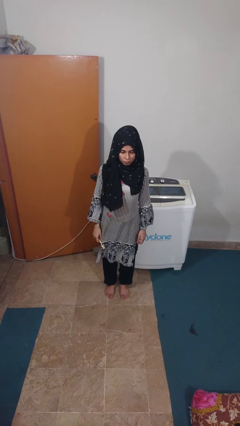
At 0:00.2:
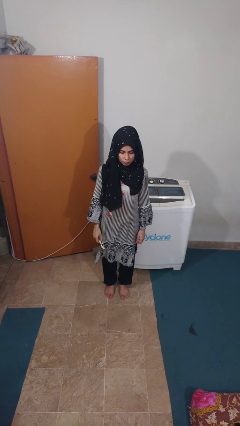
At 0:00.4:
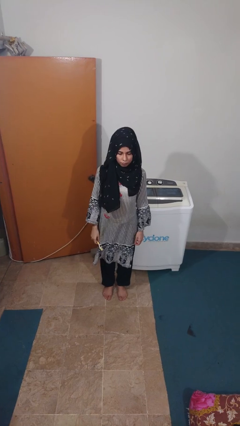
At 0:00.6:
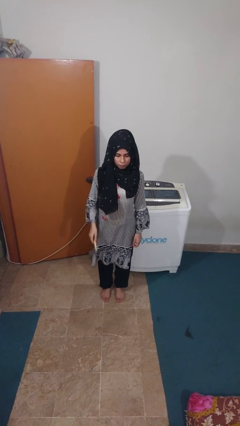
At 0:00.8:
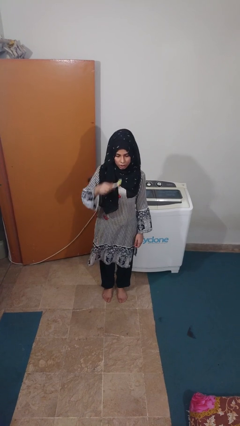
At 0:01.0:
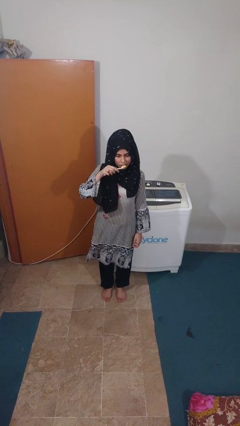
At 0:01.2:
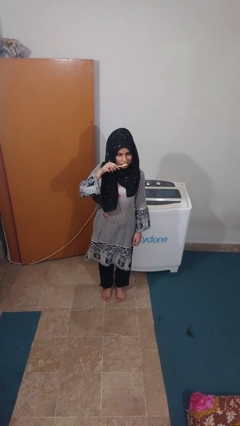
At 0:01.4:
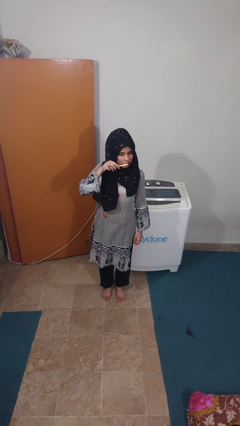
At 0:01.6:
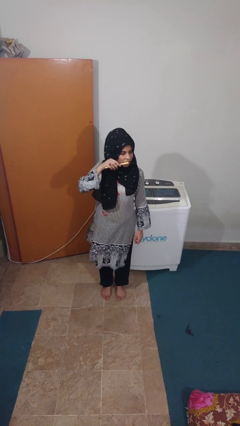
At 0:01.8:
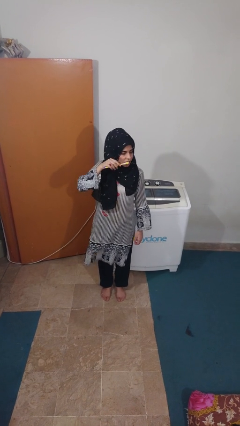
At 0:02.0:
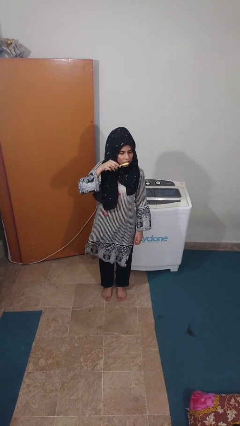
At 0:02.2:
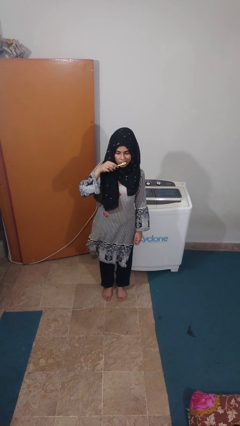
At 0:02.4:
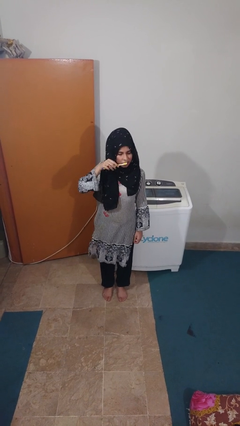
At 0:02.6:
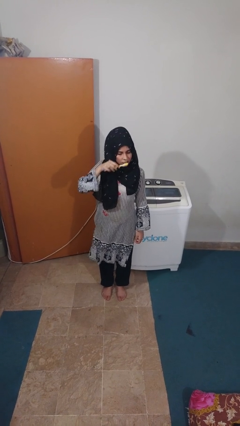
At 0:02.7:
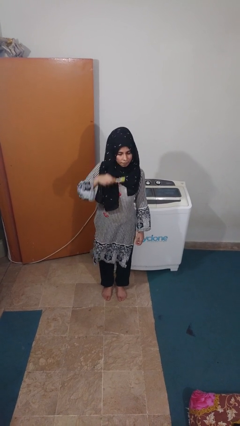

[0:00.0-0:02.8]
person brushes teeth

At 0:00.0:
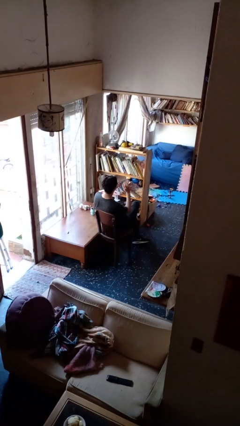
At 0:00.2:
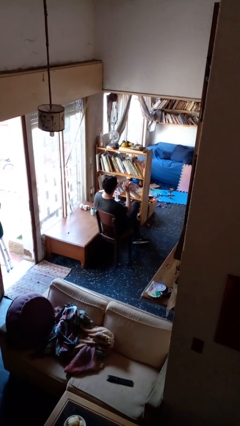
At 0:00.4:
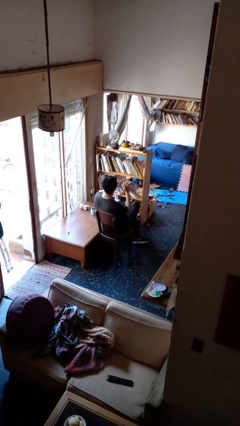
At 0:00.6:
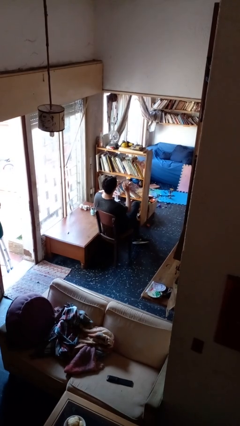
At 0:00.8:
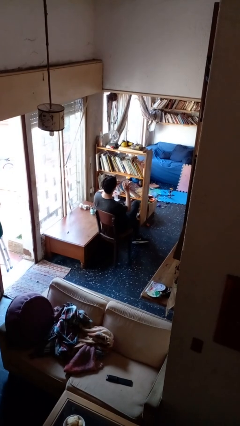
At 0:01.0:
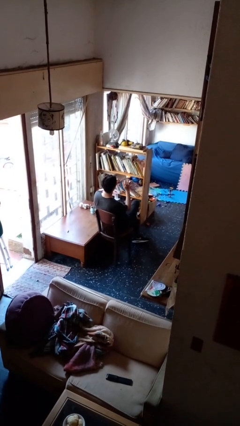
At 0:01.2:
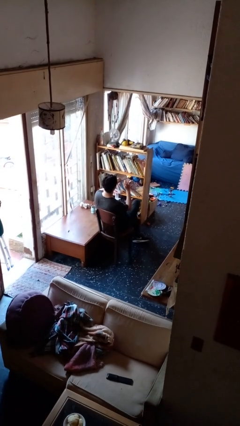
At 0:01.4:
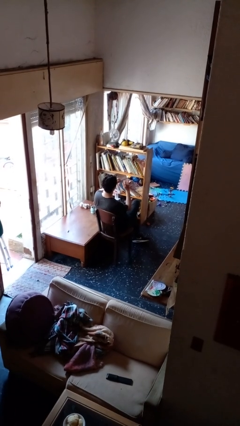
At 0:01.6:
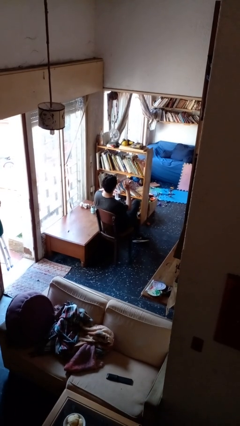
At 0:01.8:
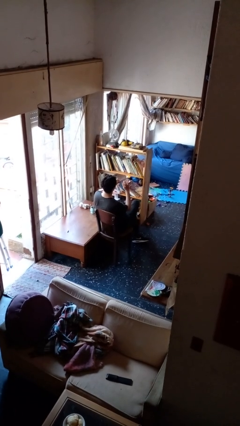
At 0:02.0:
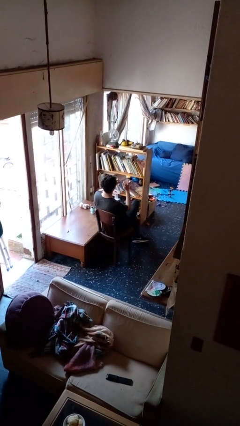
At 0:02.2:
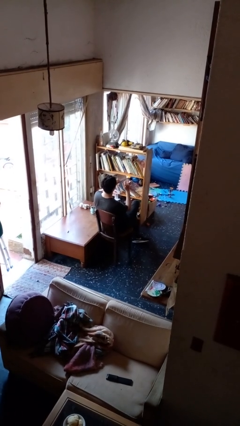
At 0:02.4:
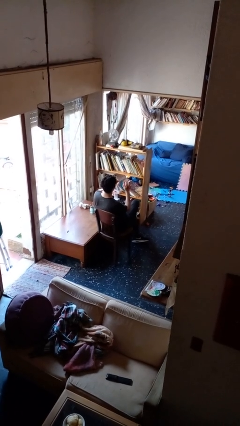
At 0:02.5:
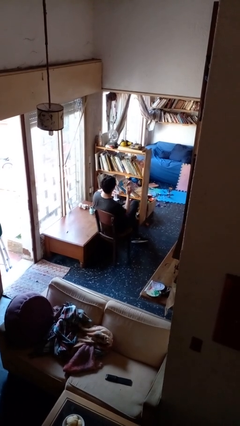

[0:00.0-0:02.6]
person files fingernails

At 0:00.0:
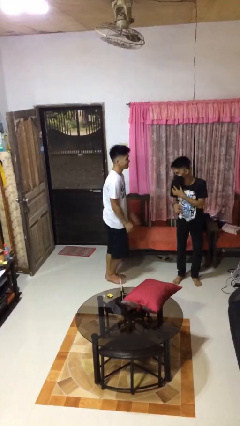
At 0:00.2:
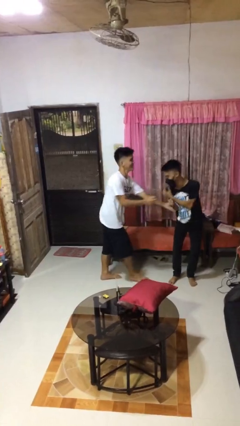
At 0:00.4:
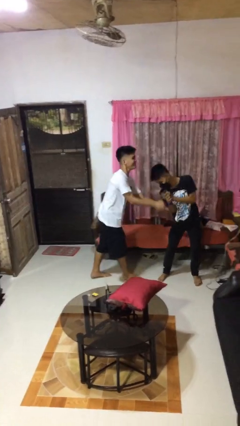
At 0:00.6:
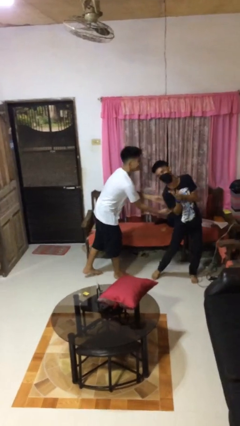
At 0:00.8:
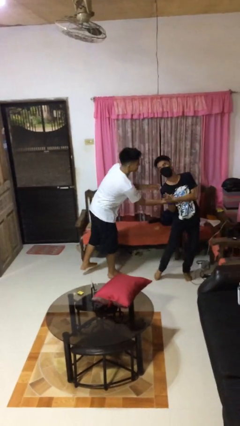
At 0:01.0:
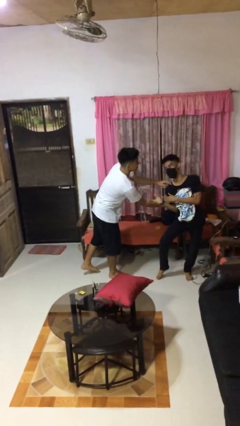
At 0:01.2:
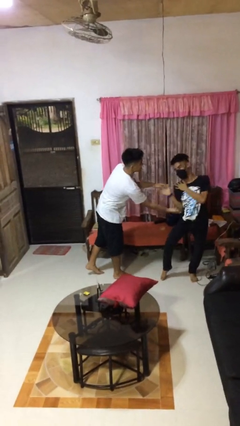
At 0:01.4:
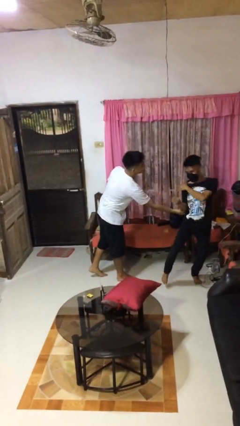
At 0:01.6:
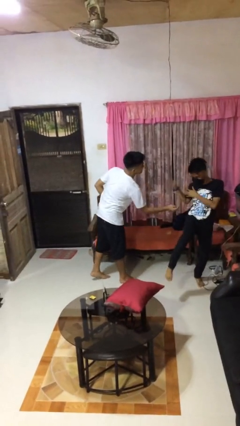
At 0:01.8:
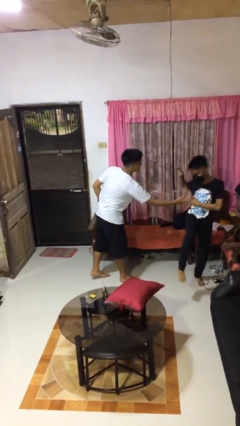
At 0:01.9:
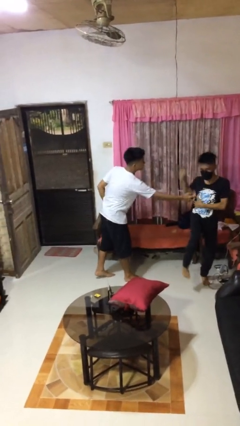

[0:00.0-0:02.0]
person tickles person

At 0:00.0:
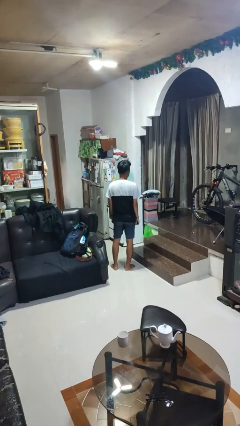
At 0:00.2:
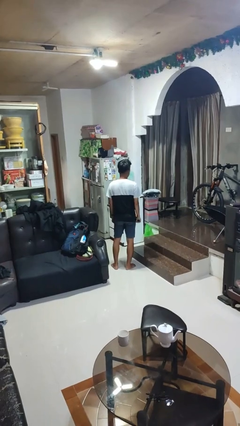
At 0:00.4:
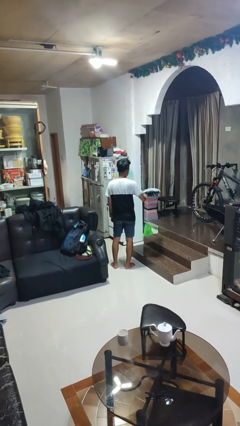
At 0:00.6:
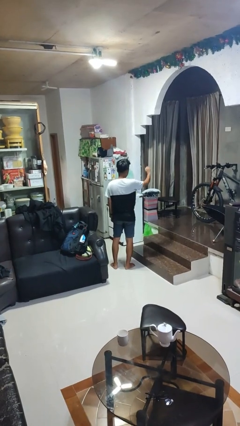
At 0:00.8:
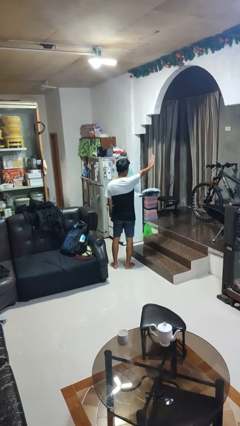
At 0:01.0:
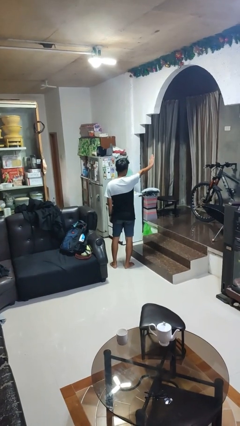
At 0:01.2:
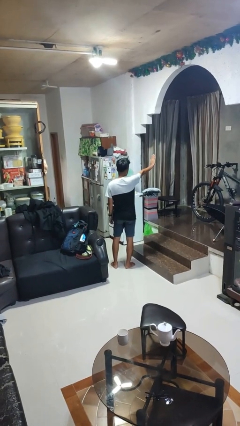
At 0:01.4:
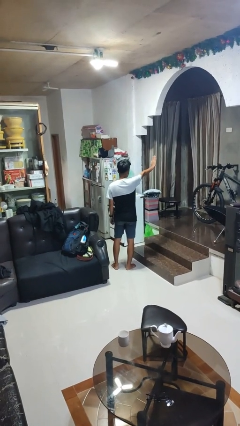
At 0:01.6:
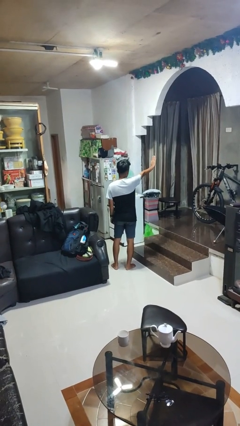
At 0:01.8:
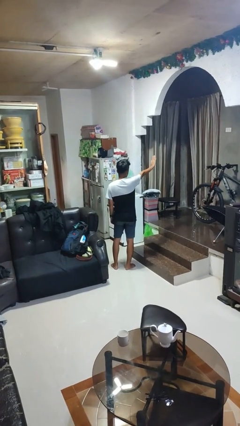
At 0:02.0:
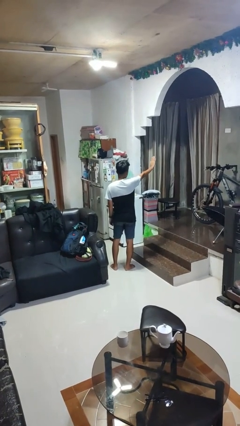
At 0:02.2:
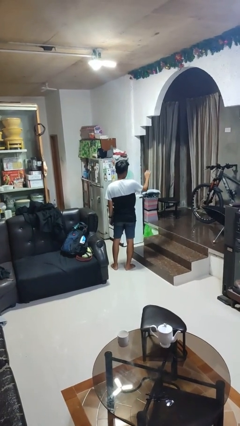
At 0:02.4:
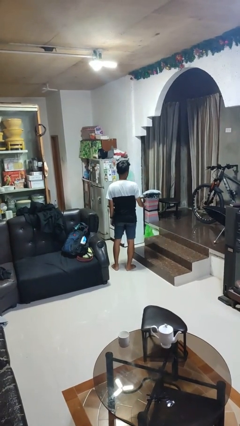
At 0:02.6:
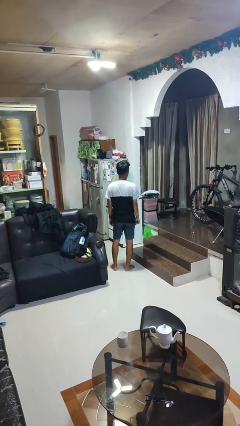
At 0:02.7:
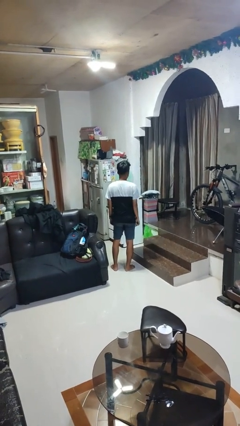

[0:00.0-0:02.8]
person gestures stop

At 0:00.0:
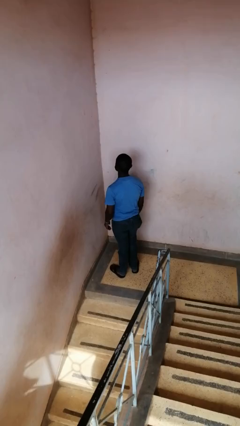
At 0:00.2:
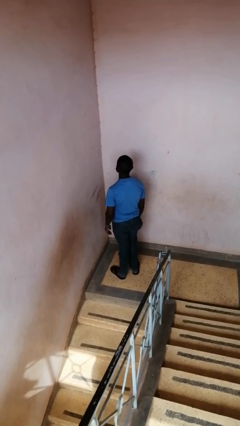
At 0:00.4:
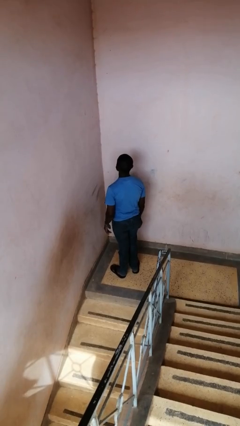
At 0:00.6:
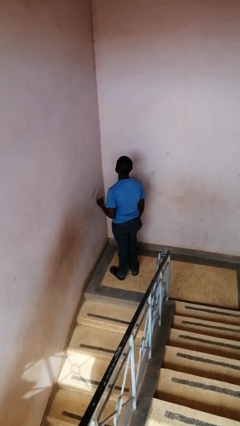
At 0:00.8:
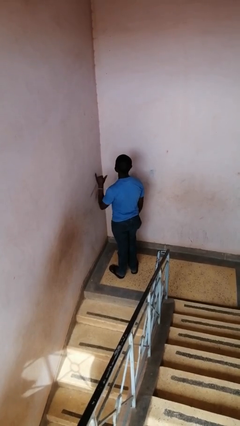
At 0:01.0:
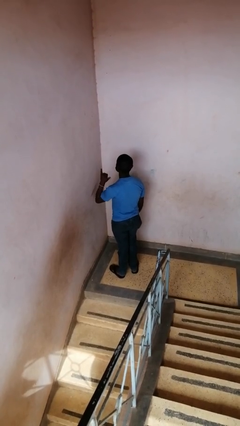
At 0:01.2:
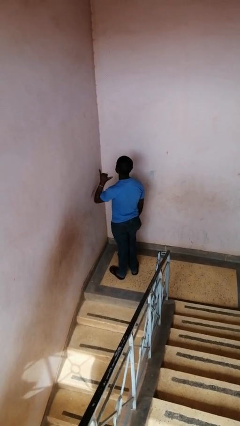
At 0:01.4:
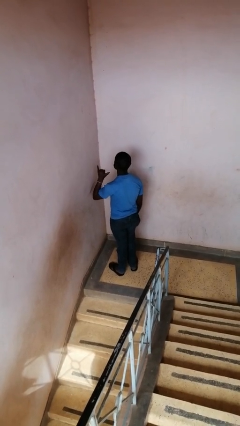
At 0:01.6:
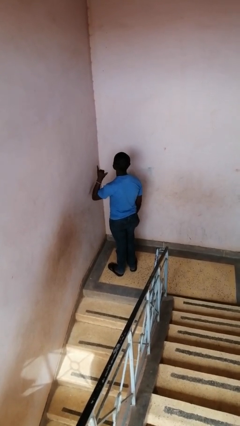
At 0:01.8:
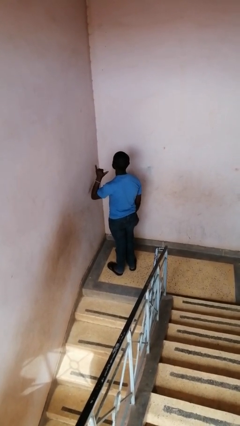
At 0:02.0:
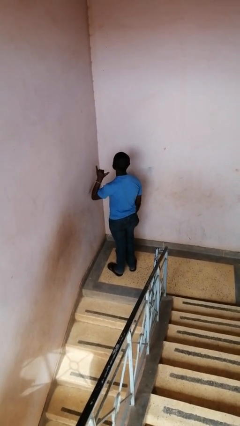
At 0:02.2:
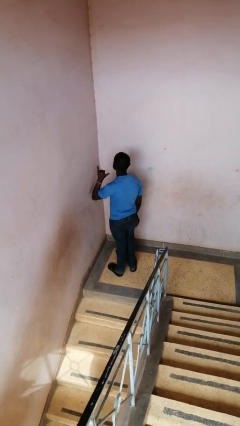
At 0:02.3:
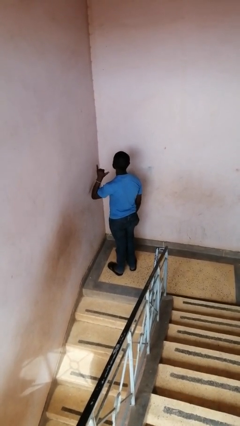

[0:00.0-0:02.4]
person gestures hang loose

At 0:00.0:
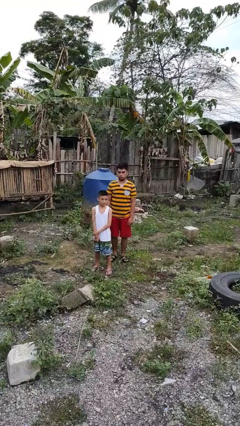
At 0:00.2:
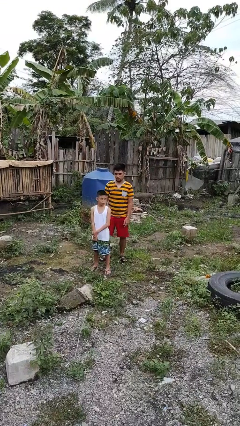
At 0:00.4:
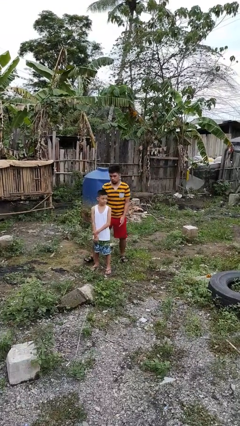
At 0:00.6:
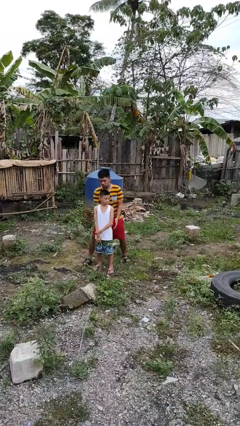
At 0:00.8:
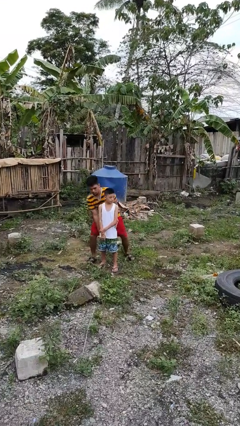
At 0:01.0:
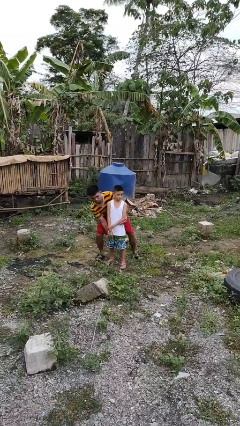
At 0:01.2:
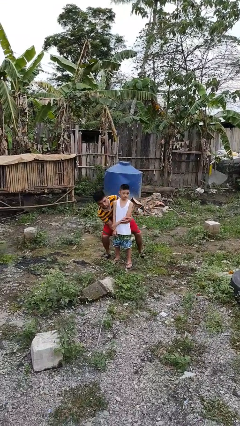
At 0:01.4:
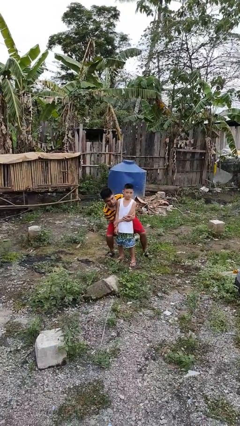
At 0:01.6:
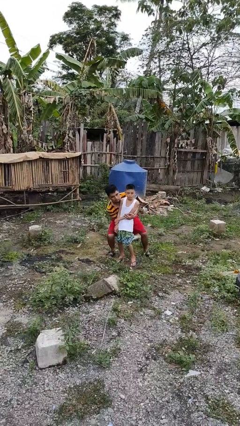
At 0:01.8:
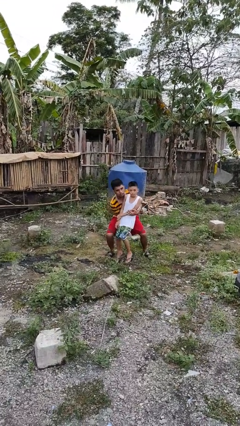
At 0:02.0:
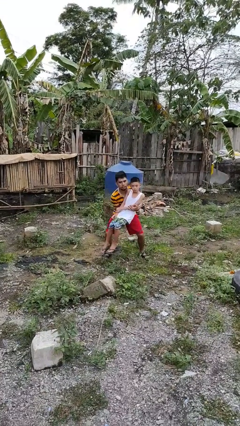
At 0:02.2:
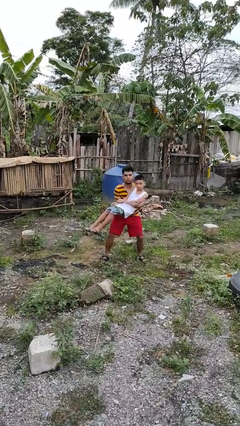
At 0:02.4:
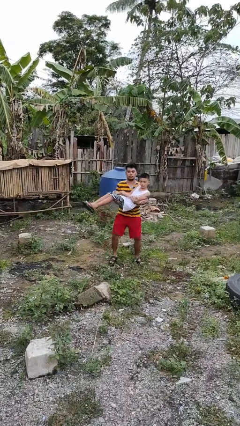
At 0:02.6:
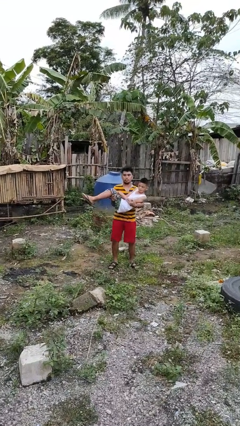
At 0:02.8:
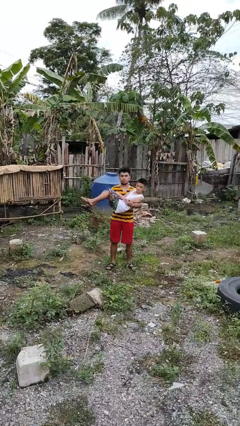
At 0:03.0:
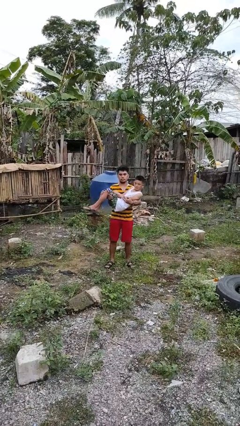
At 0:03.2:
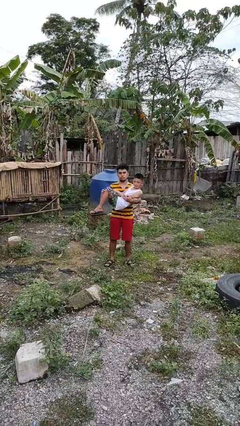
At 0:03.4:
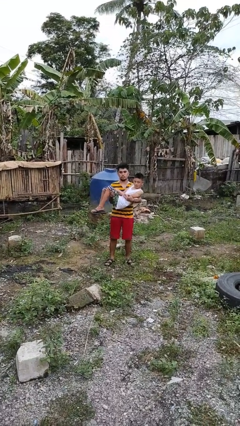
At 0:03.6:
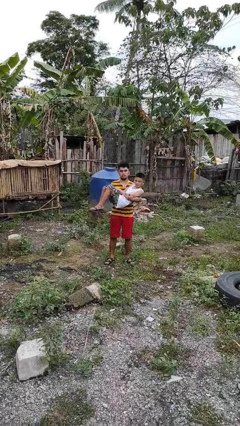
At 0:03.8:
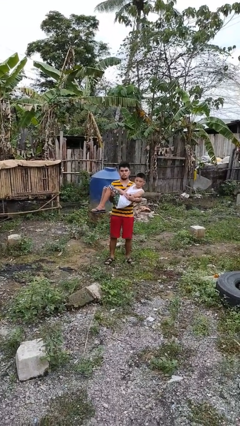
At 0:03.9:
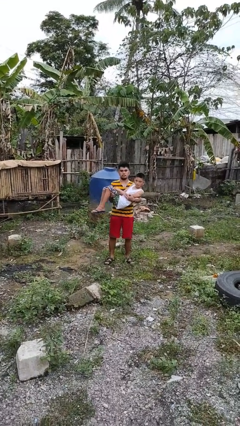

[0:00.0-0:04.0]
person picks up person

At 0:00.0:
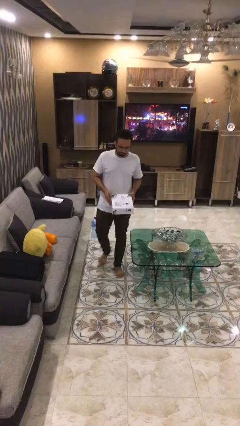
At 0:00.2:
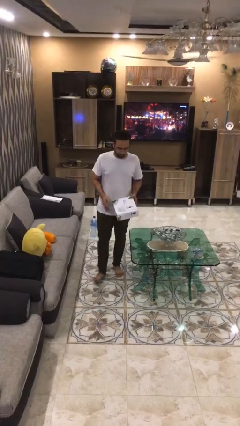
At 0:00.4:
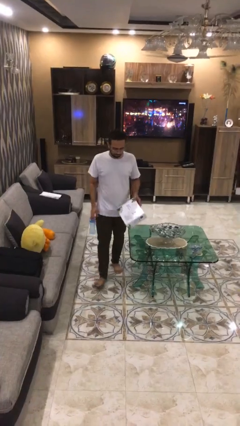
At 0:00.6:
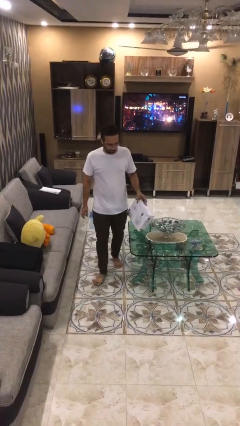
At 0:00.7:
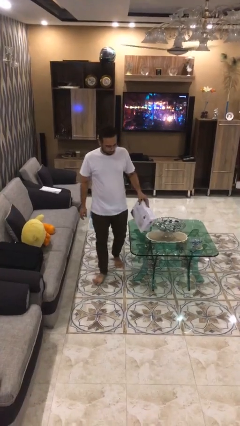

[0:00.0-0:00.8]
person puts down object on table

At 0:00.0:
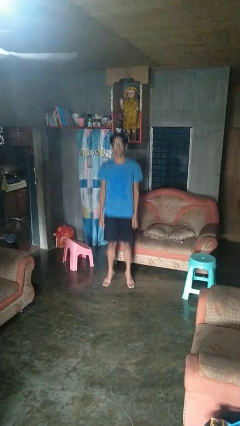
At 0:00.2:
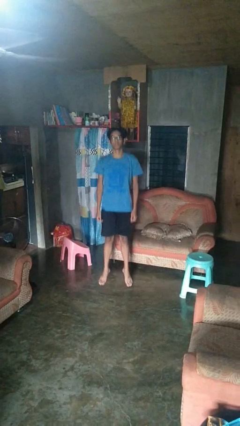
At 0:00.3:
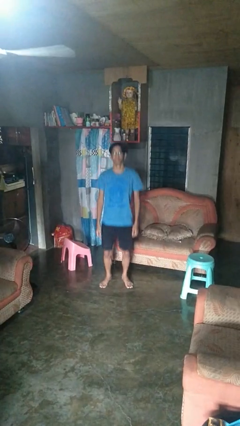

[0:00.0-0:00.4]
person jumps
